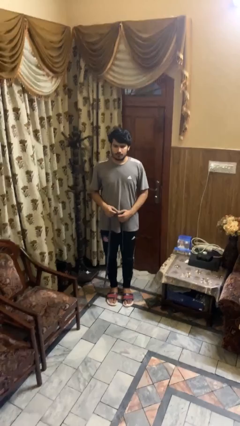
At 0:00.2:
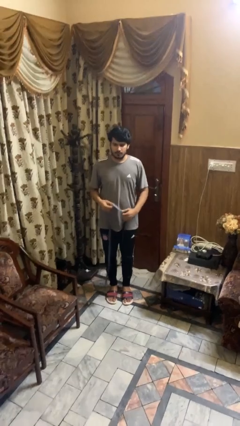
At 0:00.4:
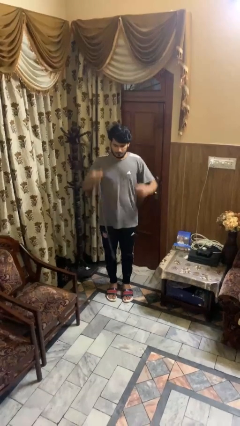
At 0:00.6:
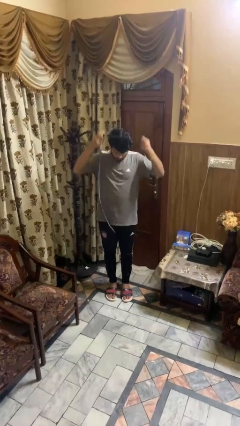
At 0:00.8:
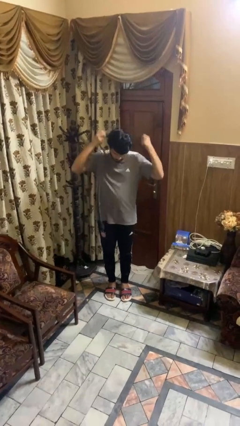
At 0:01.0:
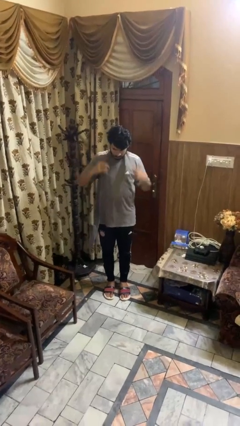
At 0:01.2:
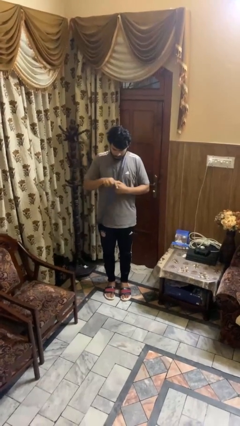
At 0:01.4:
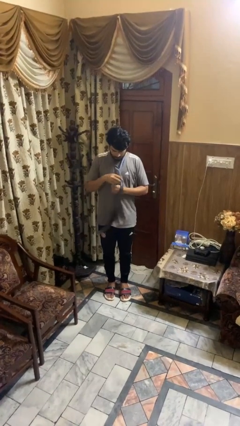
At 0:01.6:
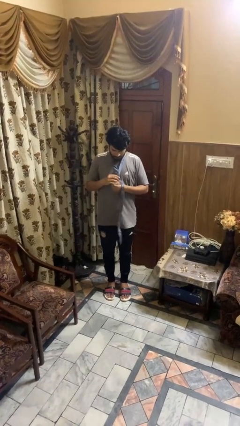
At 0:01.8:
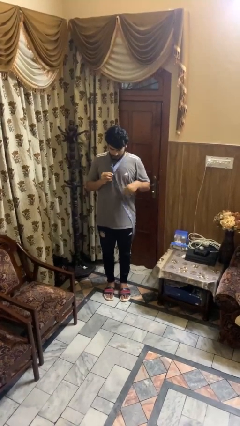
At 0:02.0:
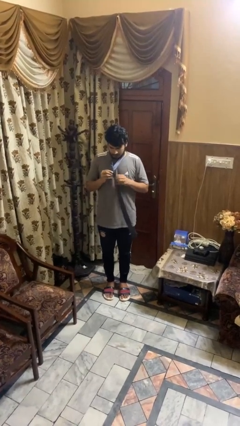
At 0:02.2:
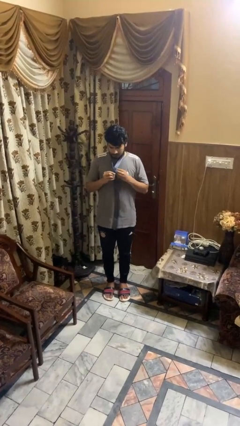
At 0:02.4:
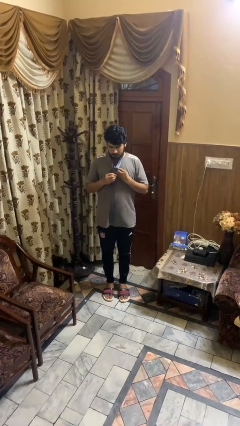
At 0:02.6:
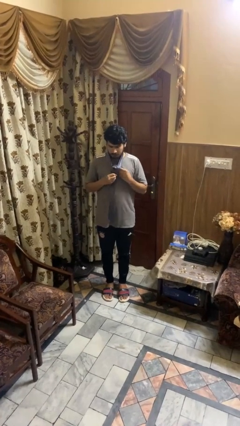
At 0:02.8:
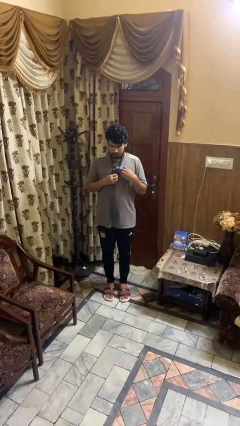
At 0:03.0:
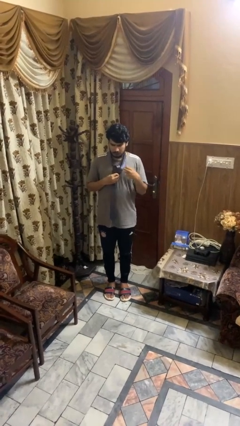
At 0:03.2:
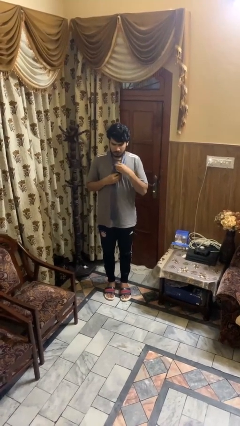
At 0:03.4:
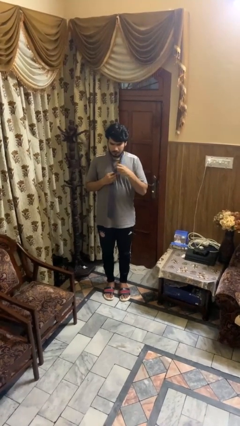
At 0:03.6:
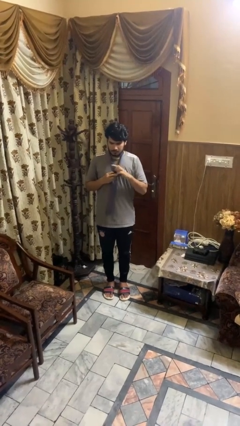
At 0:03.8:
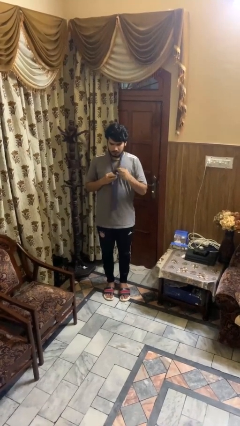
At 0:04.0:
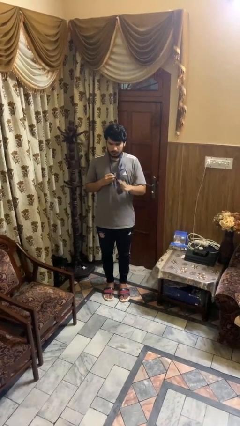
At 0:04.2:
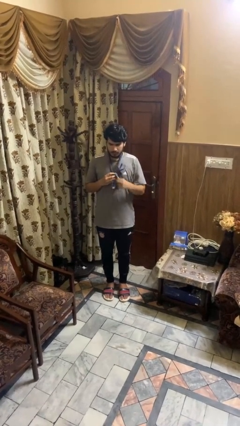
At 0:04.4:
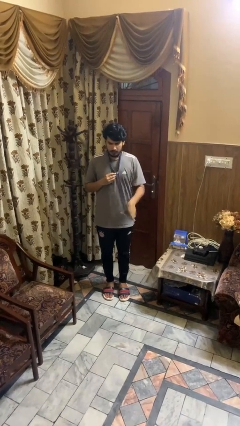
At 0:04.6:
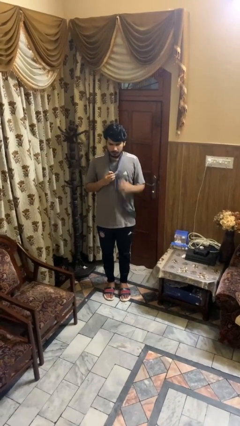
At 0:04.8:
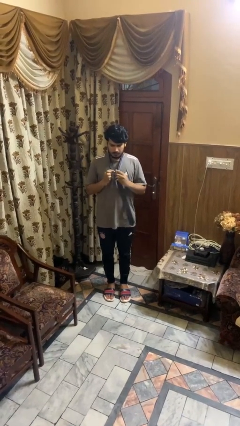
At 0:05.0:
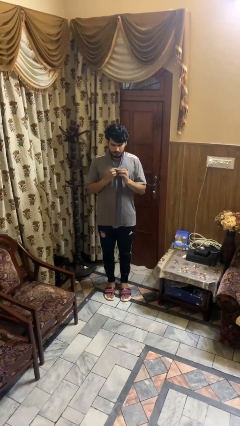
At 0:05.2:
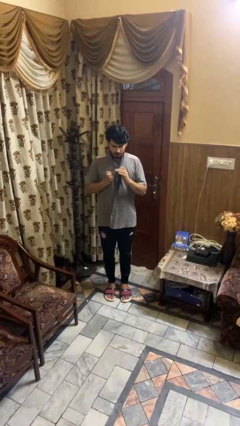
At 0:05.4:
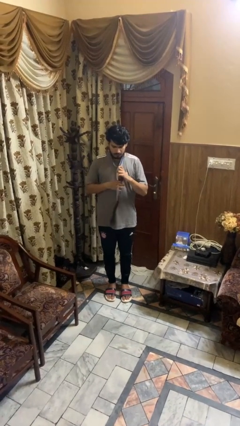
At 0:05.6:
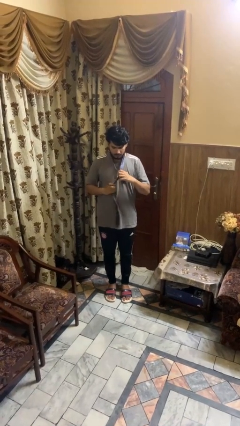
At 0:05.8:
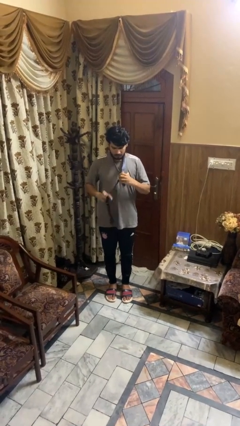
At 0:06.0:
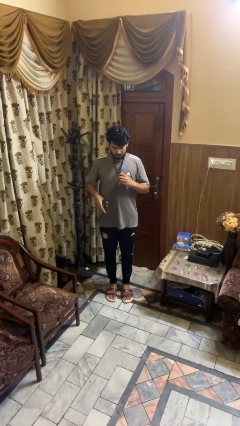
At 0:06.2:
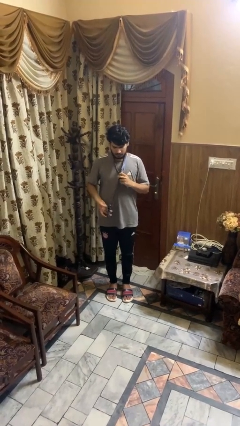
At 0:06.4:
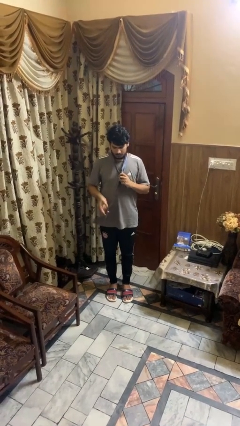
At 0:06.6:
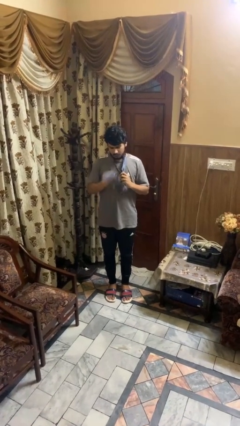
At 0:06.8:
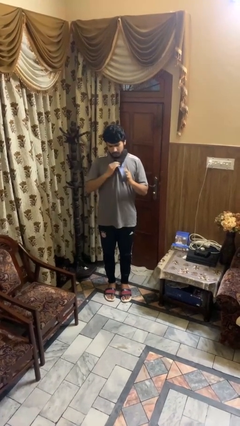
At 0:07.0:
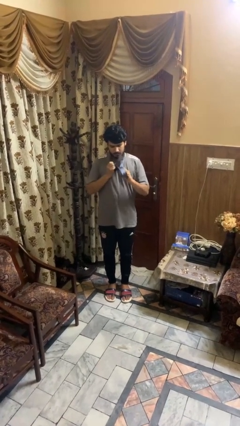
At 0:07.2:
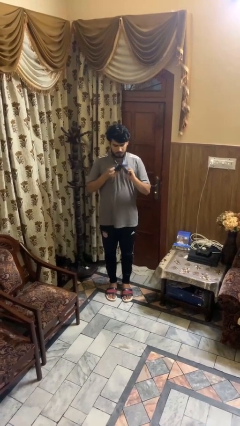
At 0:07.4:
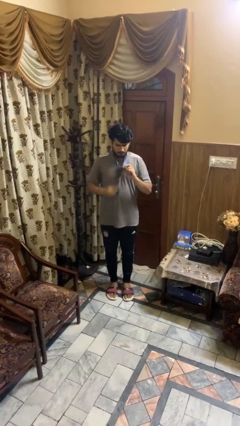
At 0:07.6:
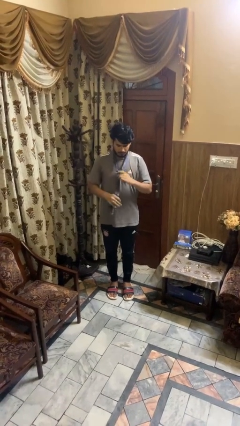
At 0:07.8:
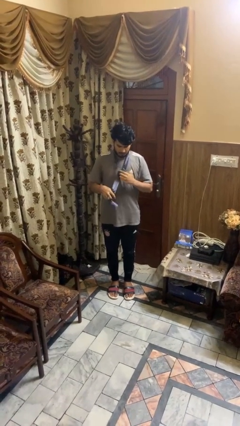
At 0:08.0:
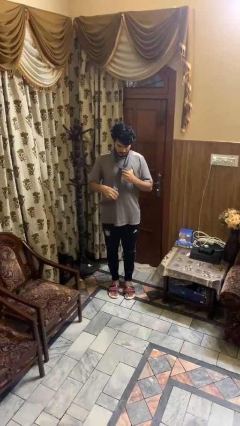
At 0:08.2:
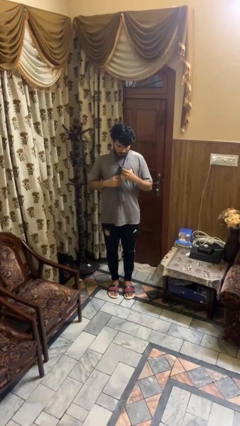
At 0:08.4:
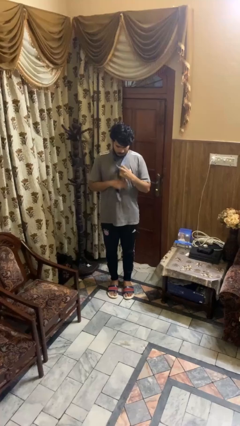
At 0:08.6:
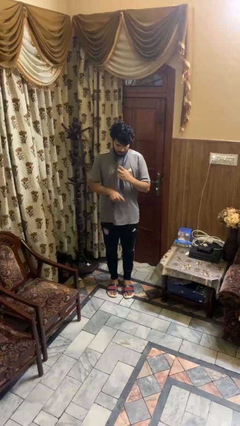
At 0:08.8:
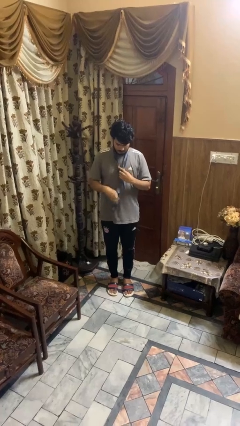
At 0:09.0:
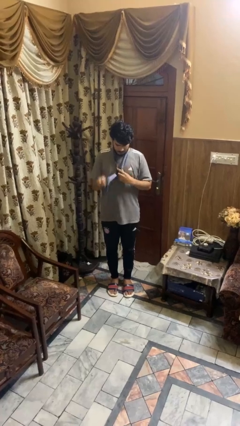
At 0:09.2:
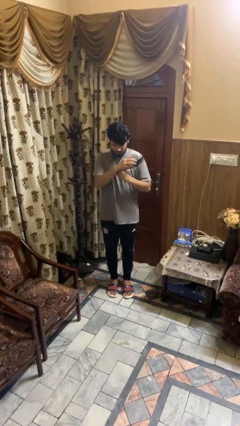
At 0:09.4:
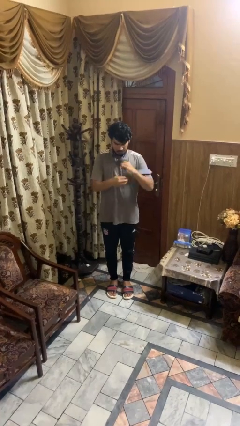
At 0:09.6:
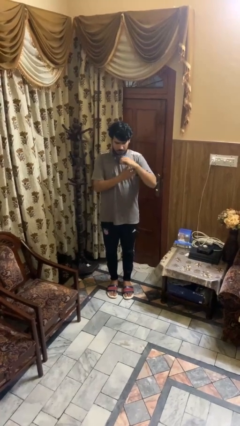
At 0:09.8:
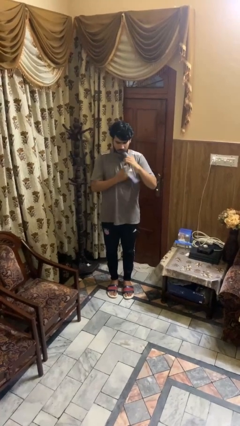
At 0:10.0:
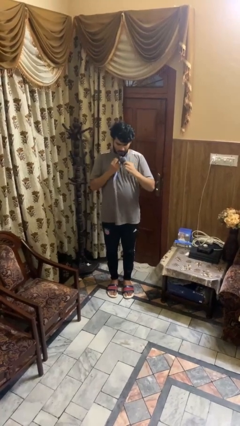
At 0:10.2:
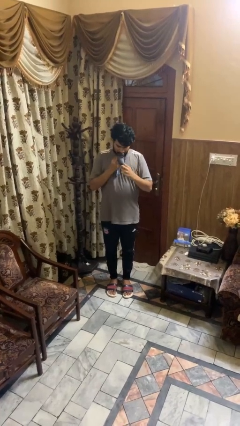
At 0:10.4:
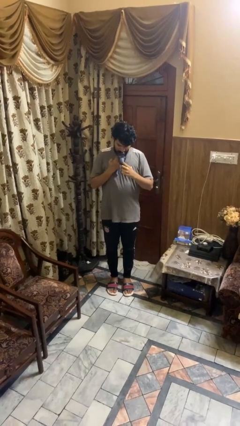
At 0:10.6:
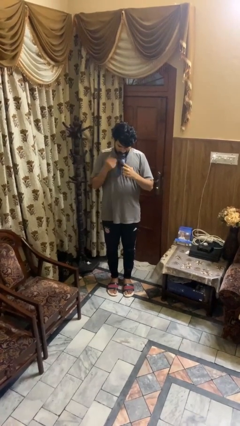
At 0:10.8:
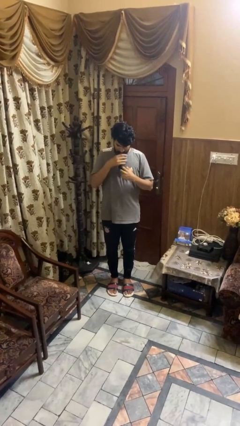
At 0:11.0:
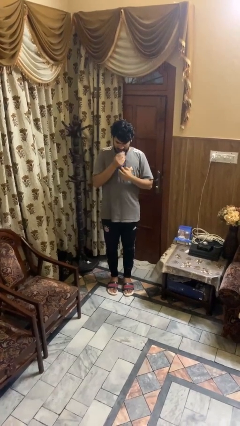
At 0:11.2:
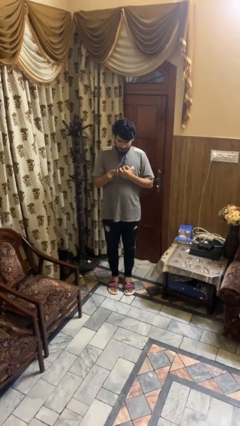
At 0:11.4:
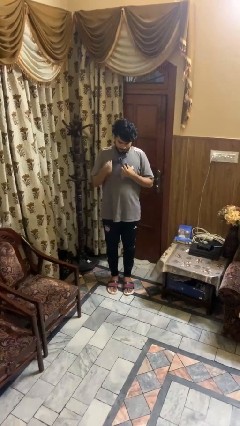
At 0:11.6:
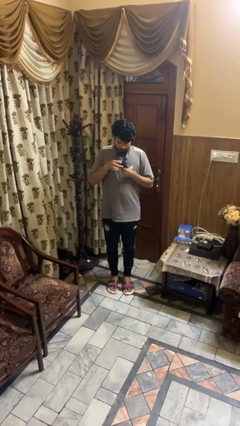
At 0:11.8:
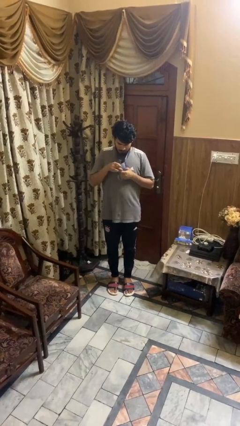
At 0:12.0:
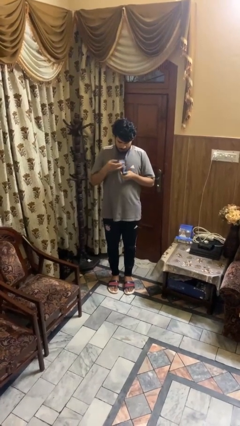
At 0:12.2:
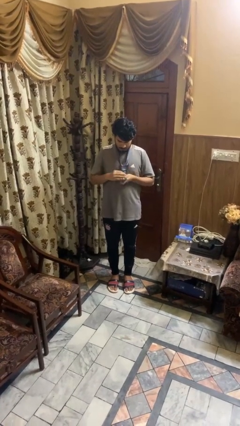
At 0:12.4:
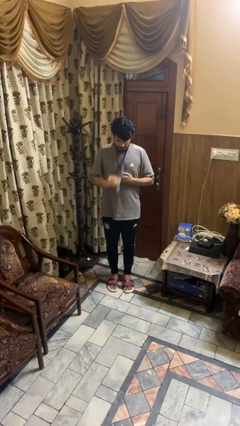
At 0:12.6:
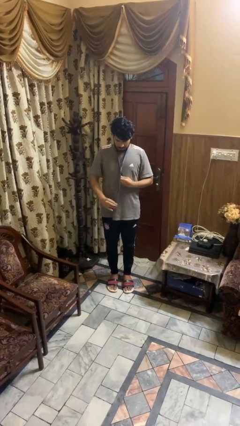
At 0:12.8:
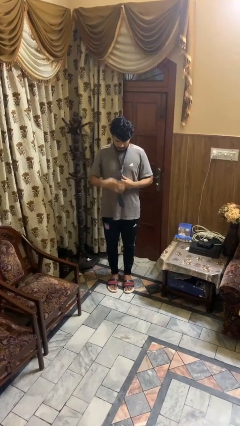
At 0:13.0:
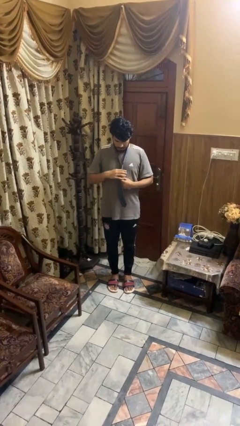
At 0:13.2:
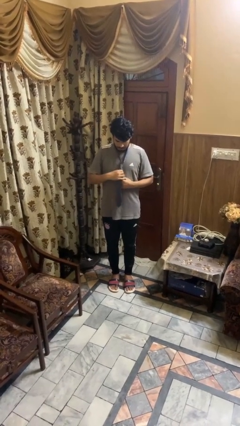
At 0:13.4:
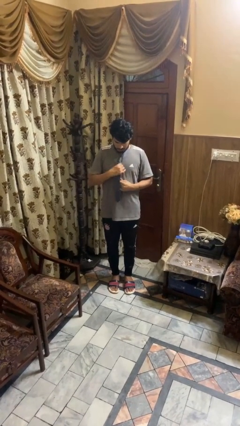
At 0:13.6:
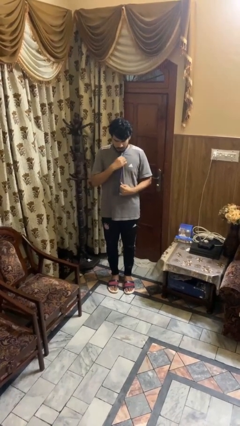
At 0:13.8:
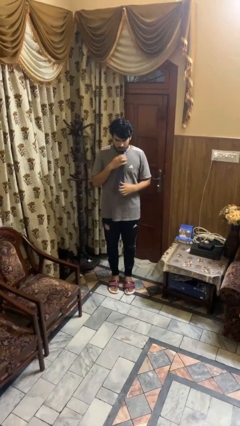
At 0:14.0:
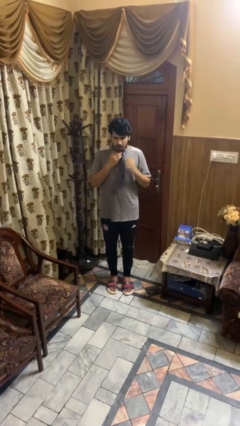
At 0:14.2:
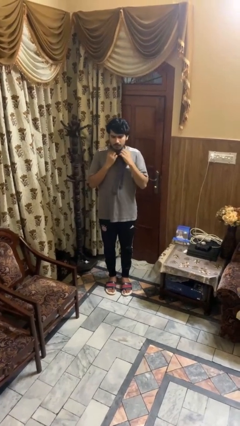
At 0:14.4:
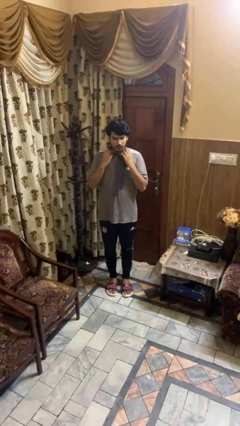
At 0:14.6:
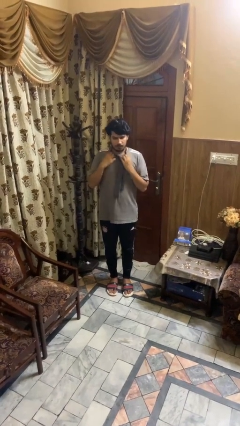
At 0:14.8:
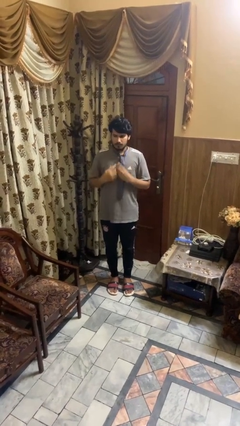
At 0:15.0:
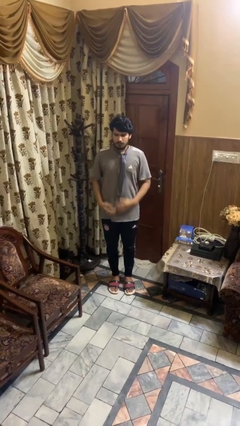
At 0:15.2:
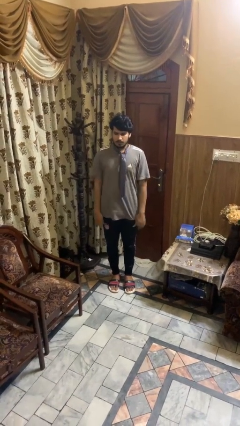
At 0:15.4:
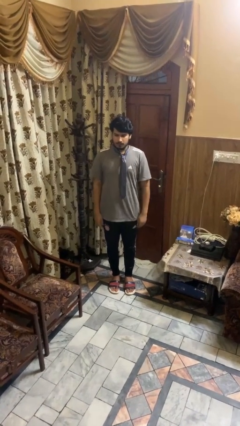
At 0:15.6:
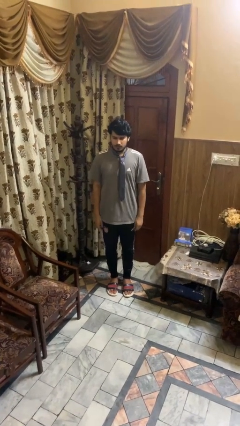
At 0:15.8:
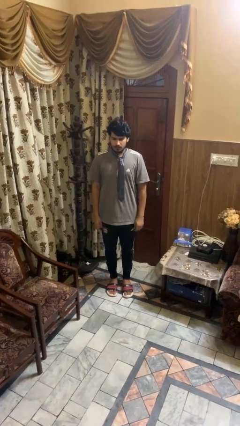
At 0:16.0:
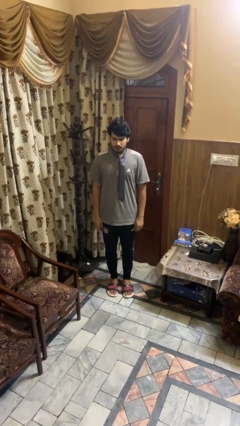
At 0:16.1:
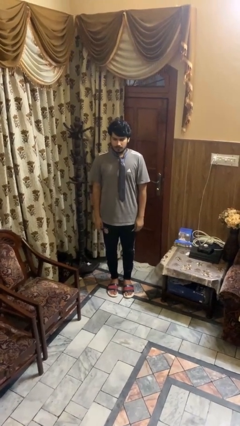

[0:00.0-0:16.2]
person puts on necktie

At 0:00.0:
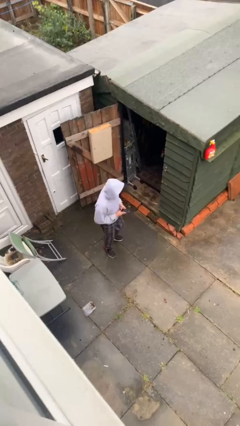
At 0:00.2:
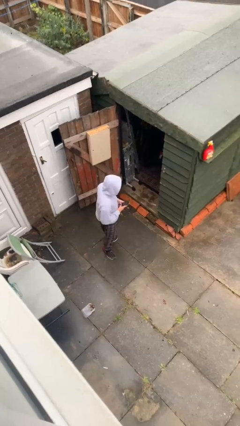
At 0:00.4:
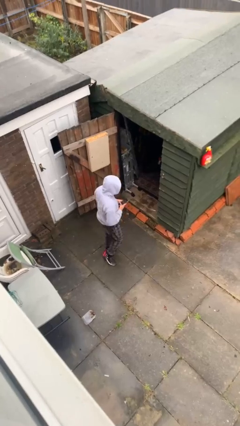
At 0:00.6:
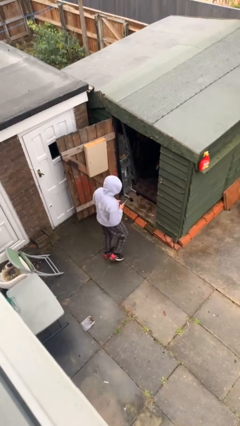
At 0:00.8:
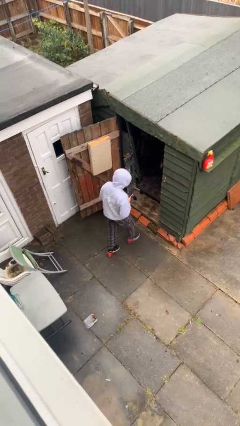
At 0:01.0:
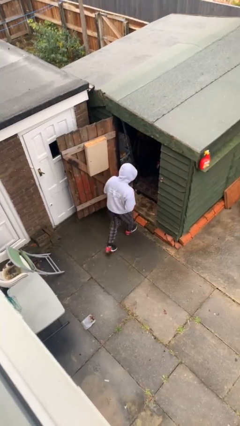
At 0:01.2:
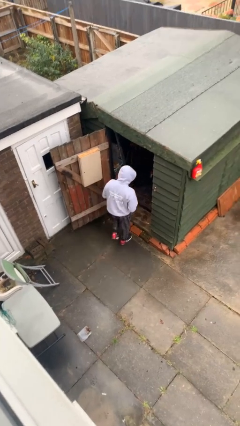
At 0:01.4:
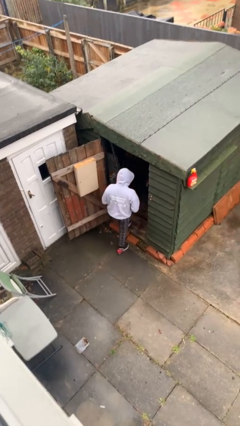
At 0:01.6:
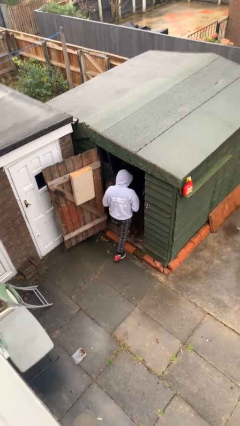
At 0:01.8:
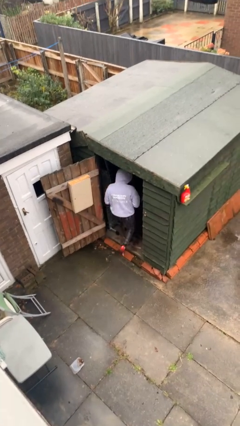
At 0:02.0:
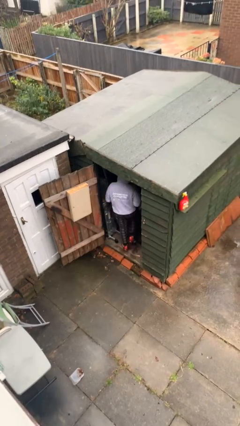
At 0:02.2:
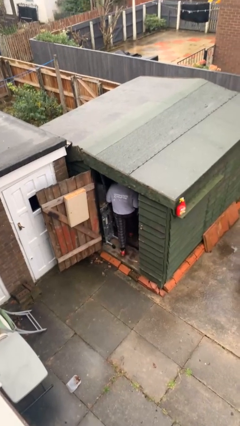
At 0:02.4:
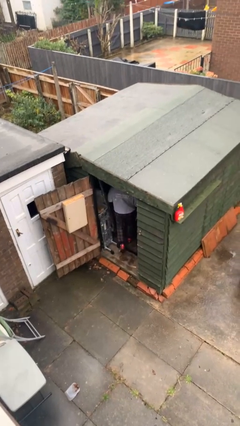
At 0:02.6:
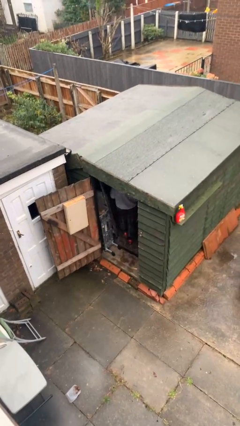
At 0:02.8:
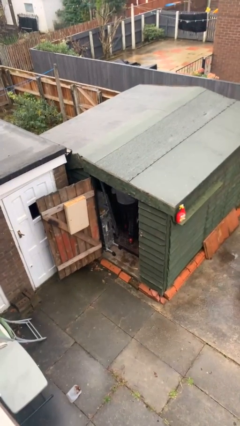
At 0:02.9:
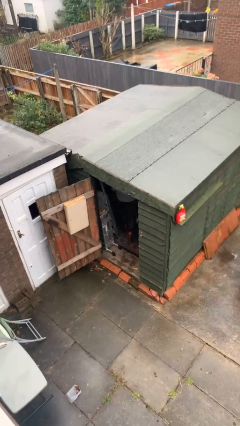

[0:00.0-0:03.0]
person exits scene through structure
